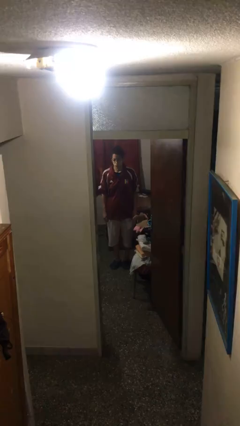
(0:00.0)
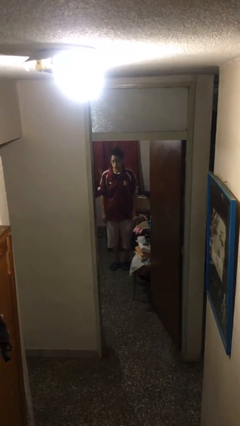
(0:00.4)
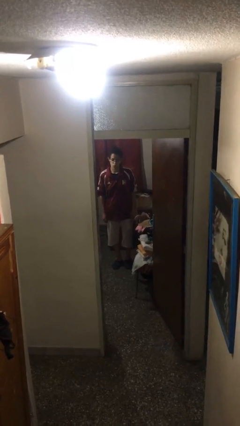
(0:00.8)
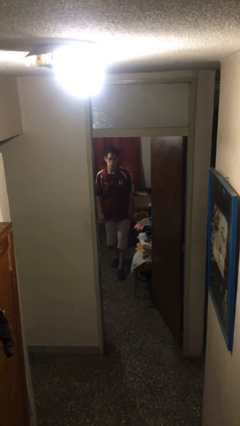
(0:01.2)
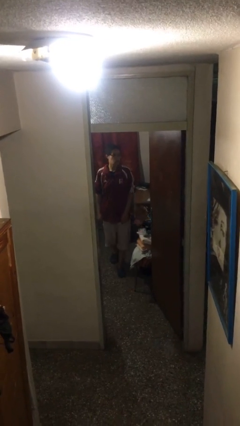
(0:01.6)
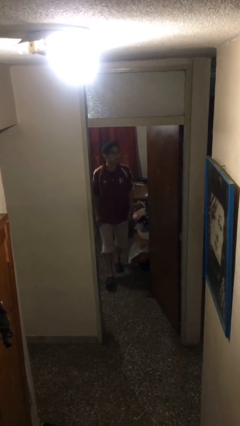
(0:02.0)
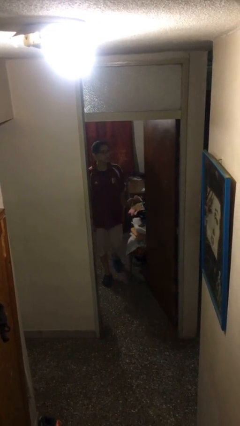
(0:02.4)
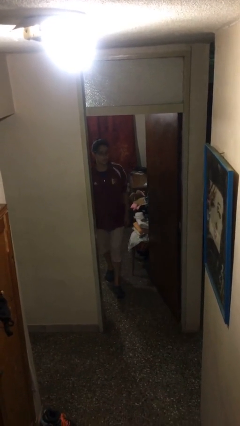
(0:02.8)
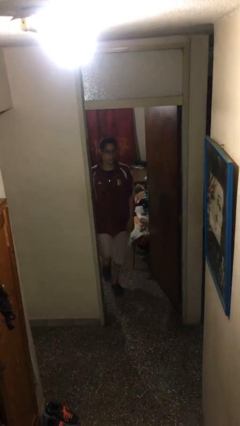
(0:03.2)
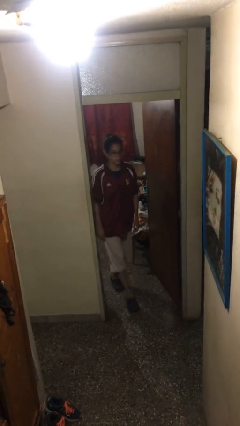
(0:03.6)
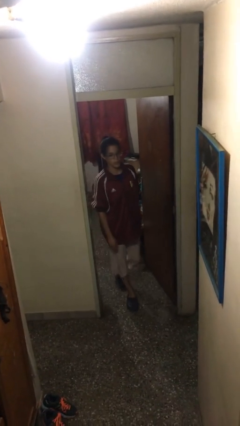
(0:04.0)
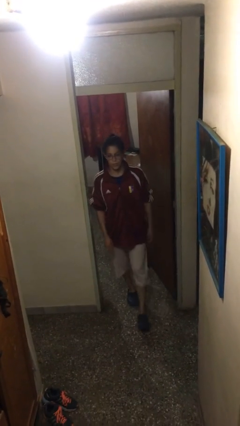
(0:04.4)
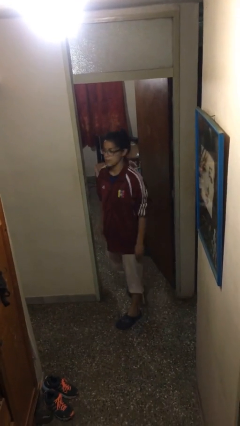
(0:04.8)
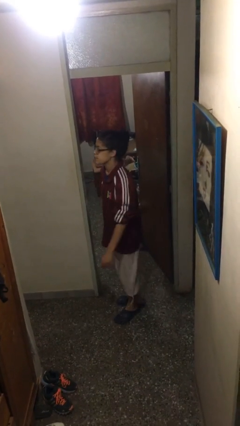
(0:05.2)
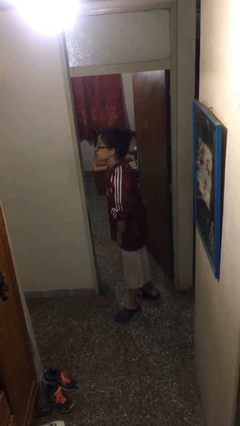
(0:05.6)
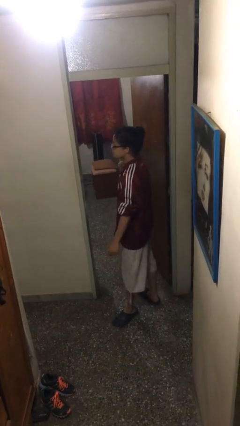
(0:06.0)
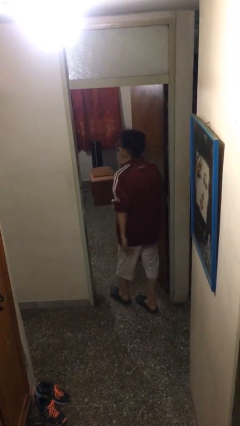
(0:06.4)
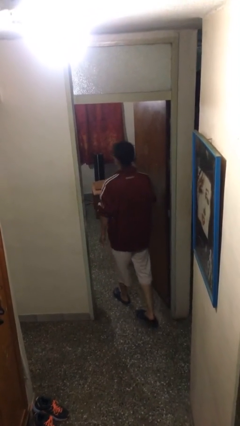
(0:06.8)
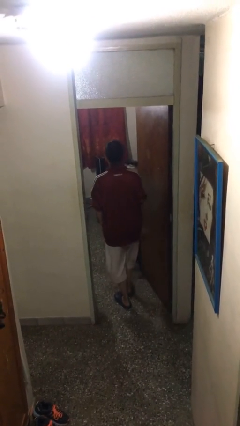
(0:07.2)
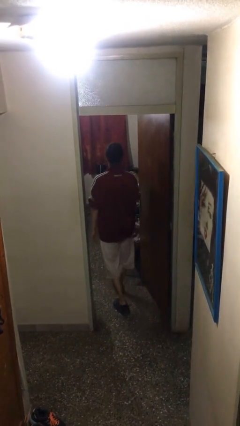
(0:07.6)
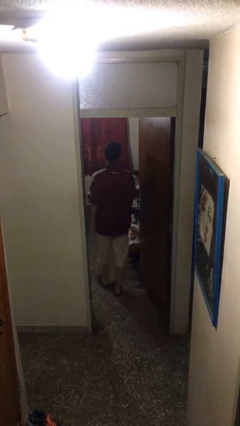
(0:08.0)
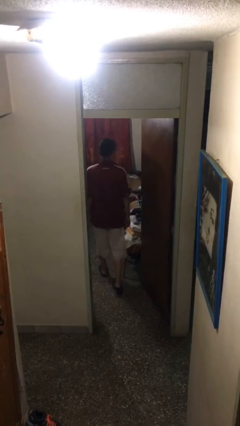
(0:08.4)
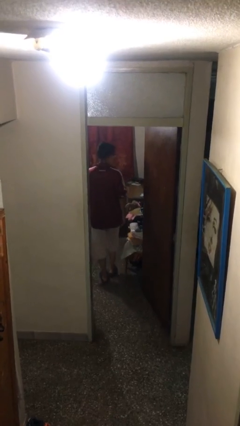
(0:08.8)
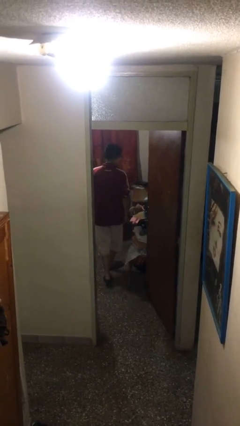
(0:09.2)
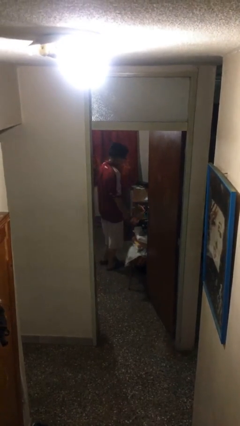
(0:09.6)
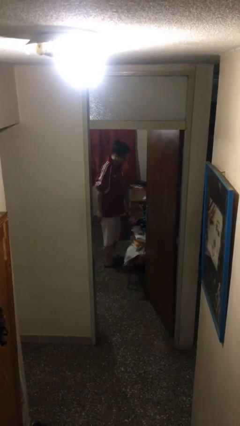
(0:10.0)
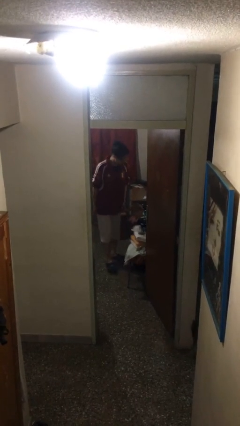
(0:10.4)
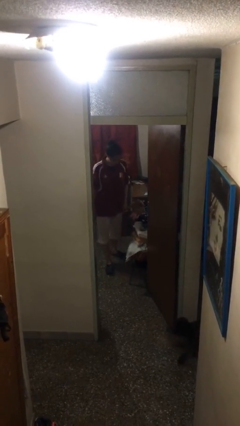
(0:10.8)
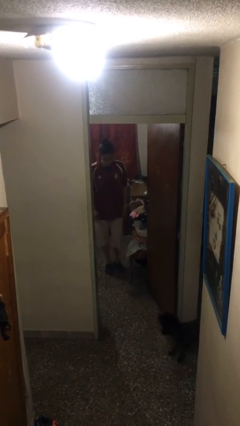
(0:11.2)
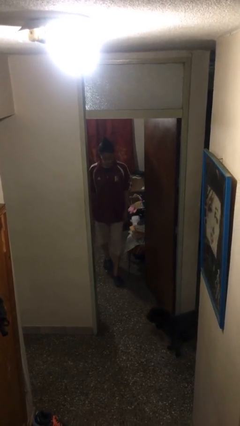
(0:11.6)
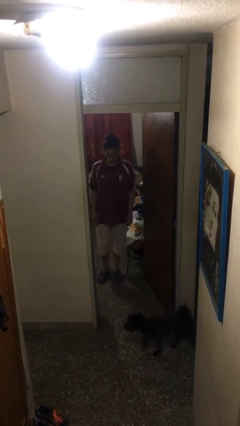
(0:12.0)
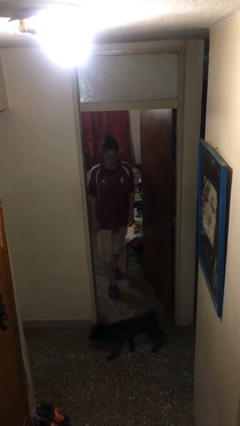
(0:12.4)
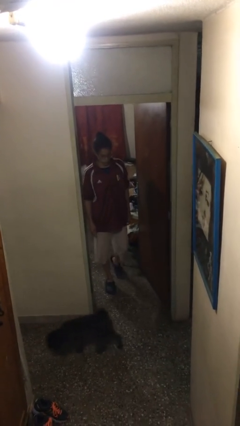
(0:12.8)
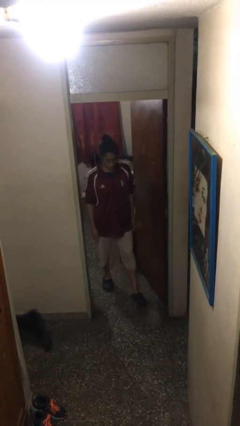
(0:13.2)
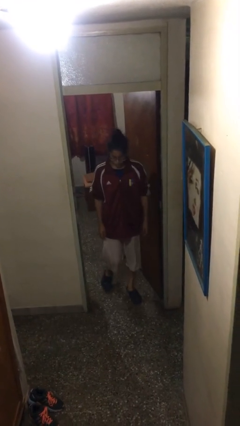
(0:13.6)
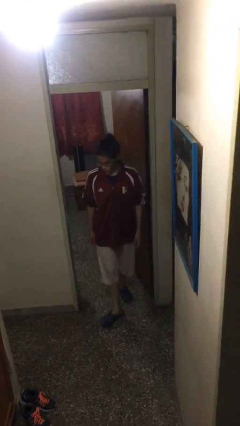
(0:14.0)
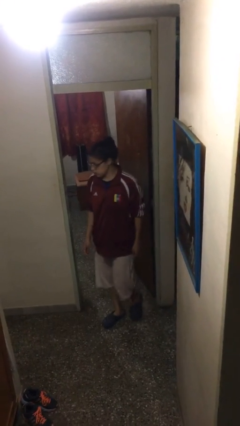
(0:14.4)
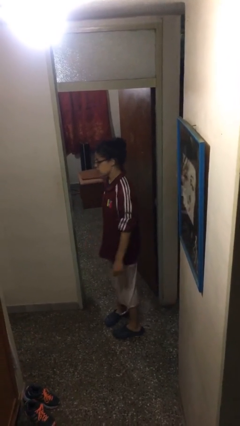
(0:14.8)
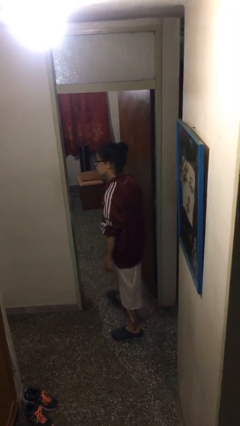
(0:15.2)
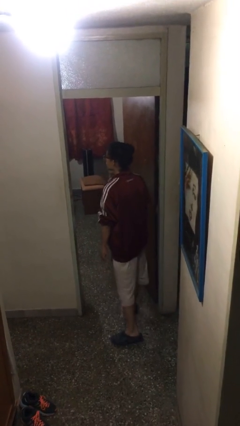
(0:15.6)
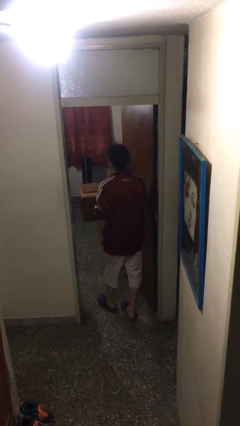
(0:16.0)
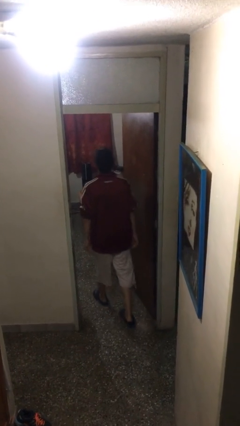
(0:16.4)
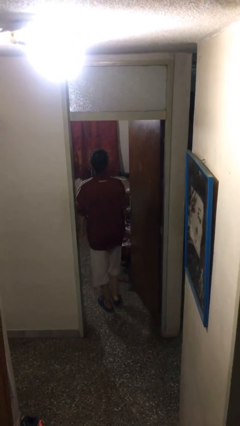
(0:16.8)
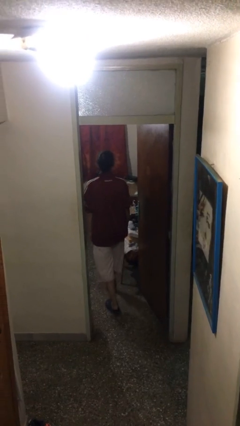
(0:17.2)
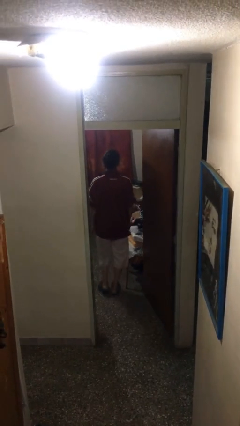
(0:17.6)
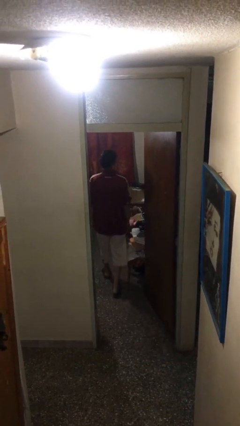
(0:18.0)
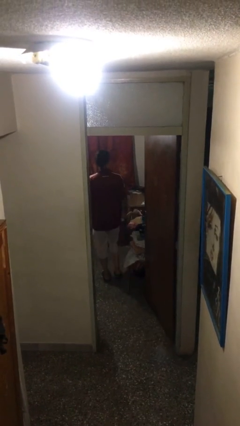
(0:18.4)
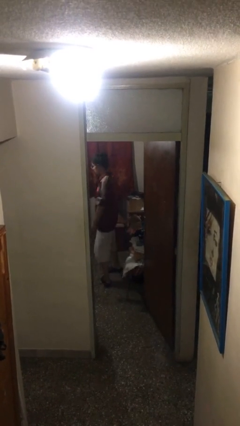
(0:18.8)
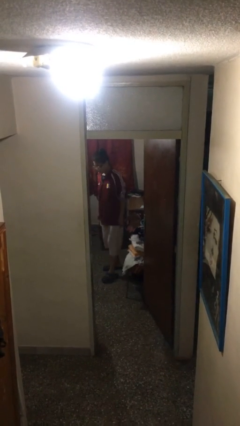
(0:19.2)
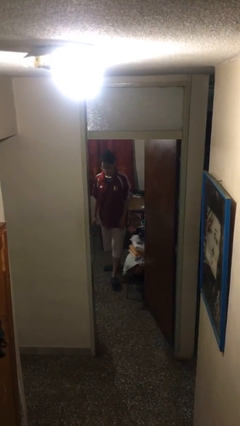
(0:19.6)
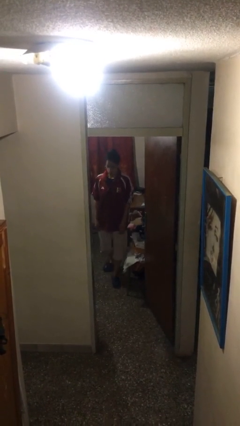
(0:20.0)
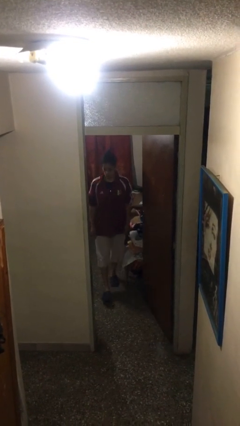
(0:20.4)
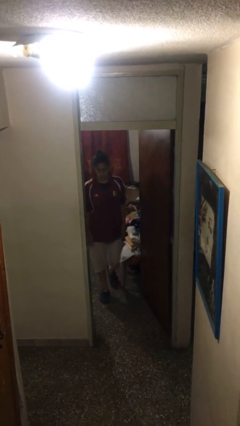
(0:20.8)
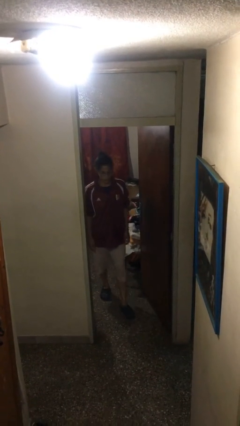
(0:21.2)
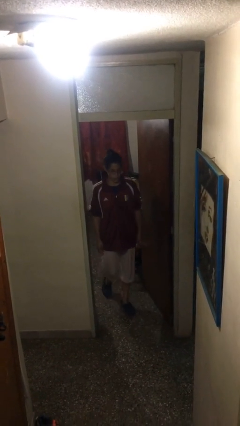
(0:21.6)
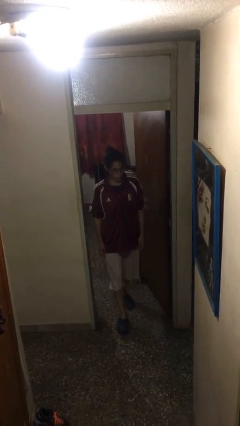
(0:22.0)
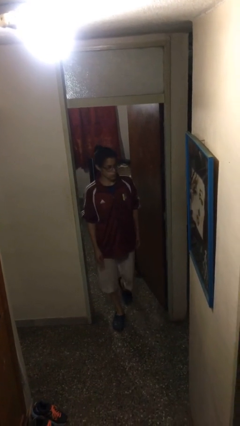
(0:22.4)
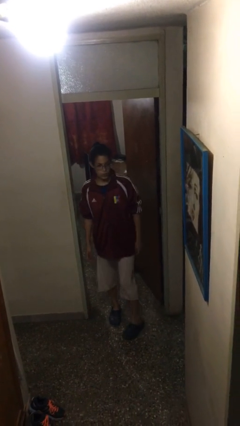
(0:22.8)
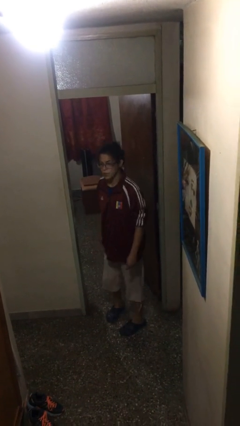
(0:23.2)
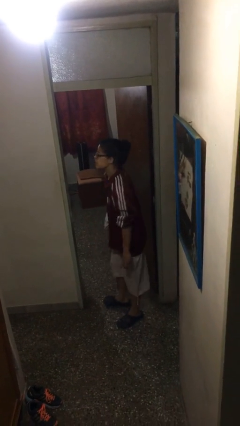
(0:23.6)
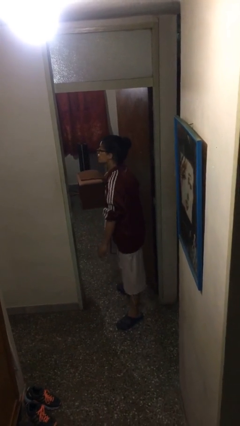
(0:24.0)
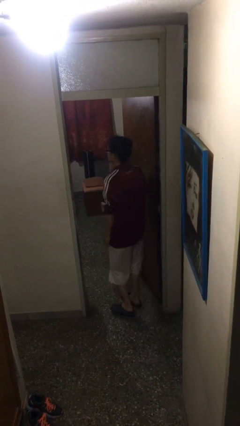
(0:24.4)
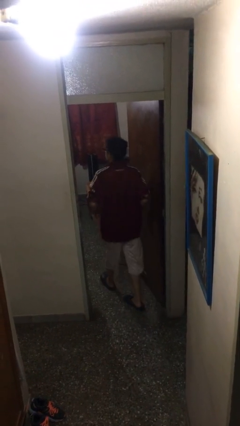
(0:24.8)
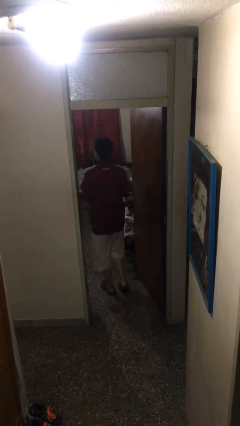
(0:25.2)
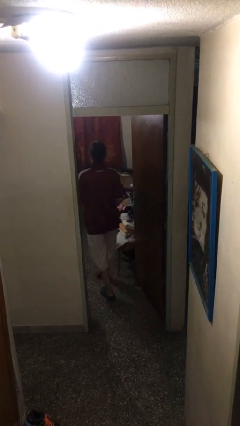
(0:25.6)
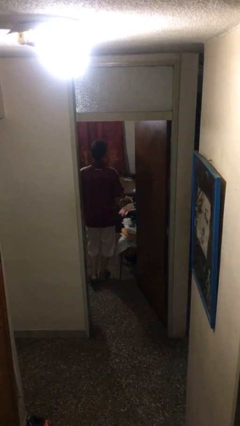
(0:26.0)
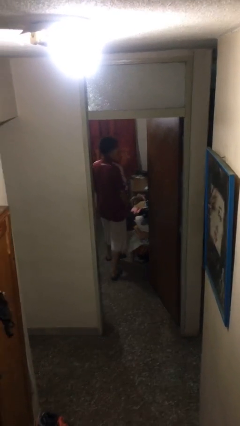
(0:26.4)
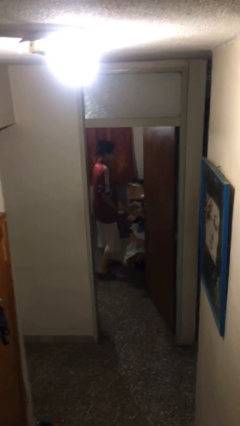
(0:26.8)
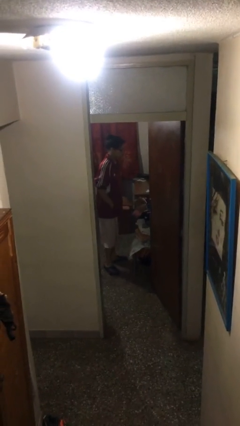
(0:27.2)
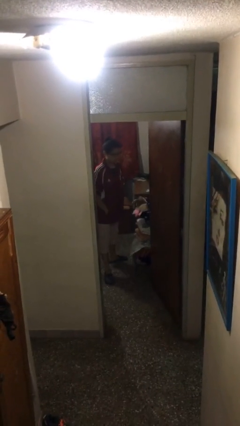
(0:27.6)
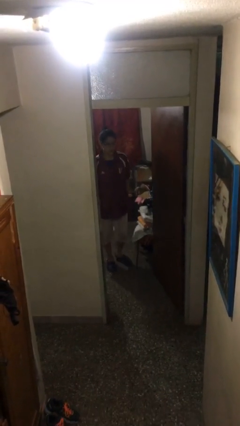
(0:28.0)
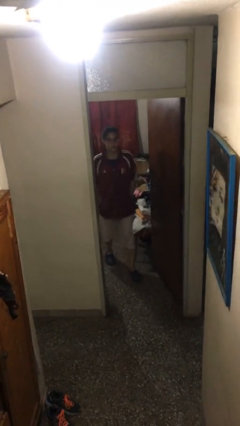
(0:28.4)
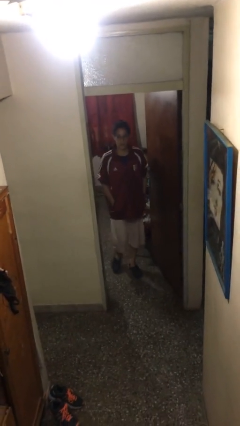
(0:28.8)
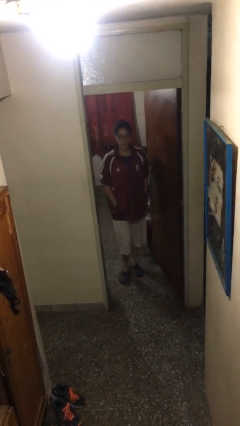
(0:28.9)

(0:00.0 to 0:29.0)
person walks

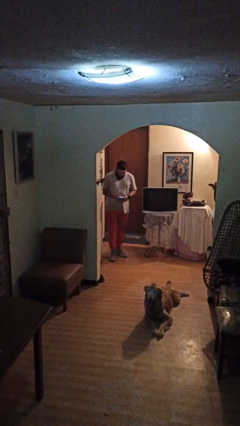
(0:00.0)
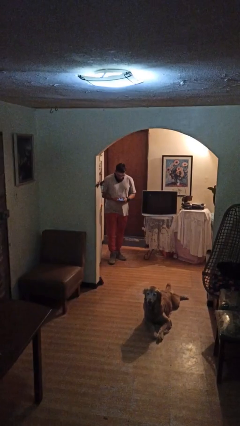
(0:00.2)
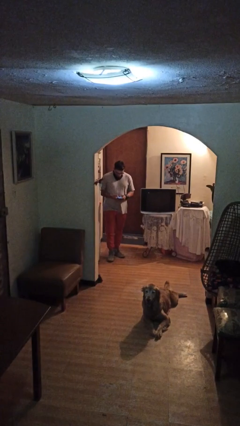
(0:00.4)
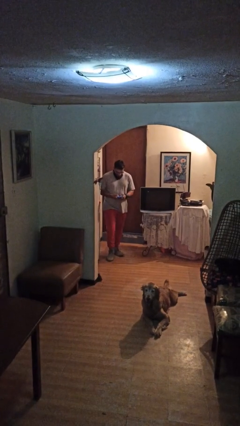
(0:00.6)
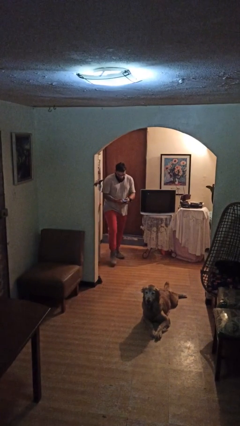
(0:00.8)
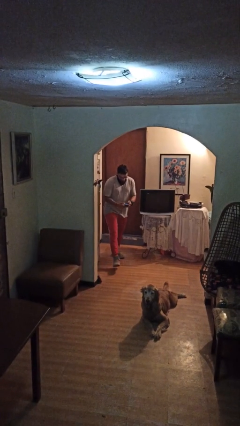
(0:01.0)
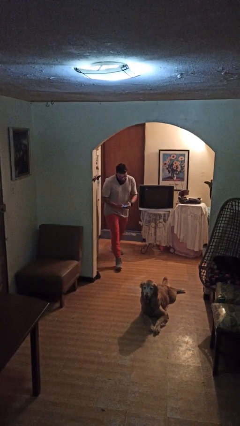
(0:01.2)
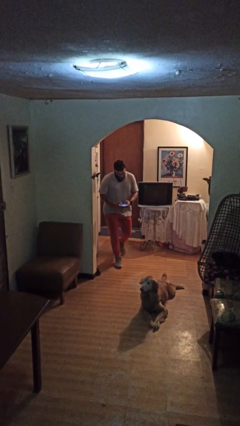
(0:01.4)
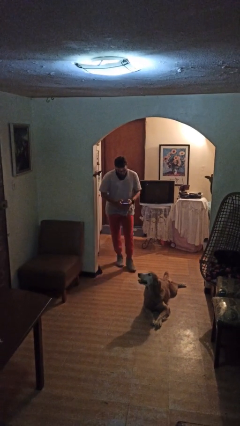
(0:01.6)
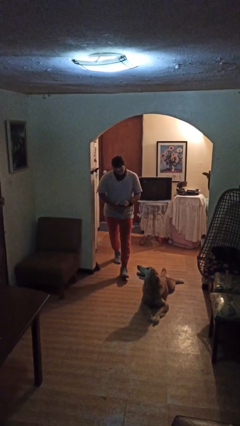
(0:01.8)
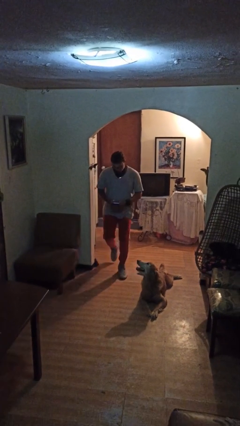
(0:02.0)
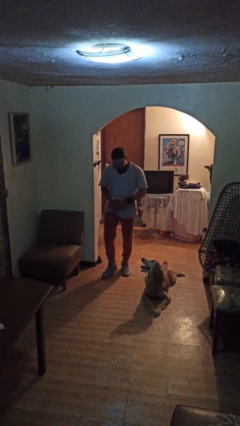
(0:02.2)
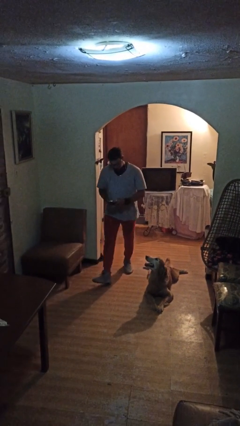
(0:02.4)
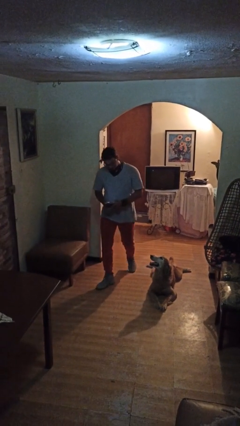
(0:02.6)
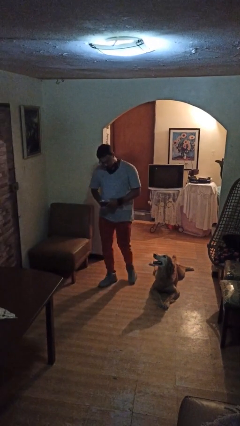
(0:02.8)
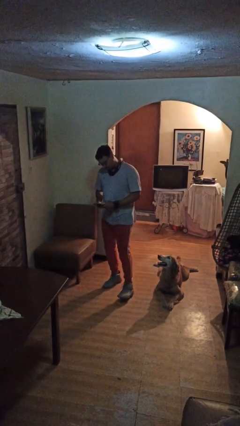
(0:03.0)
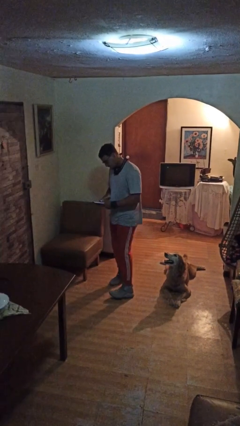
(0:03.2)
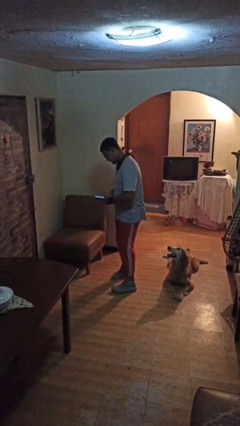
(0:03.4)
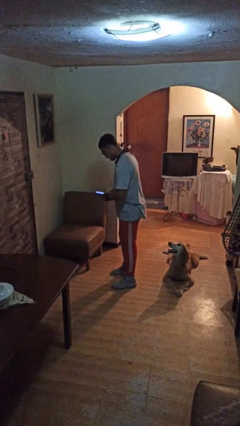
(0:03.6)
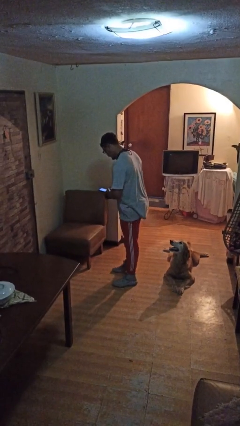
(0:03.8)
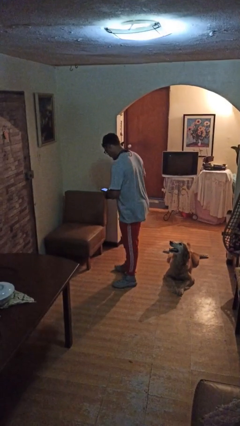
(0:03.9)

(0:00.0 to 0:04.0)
person enters scene through structure
